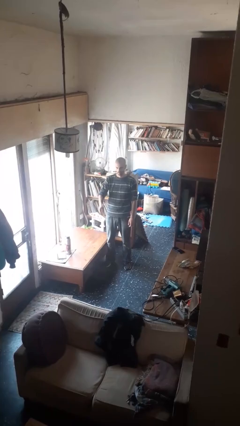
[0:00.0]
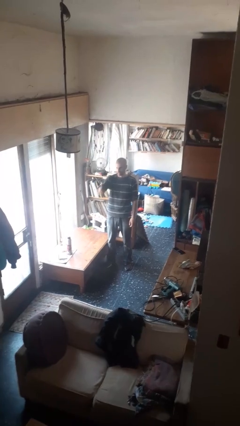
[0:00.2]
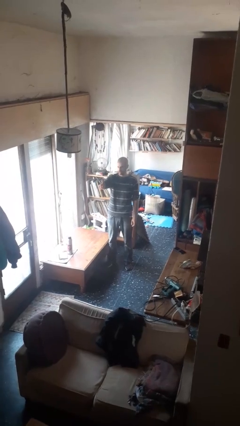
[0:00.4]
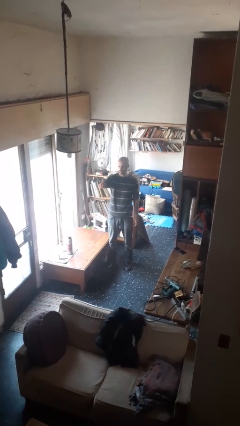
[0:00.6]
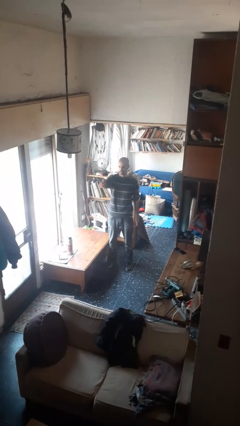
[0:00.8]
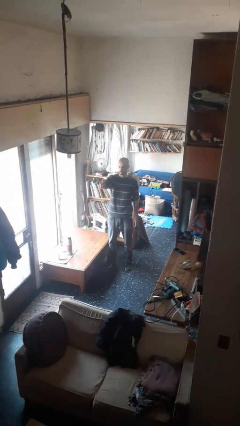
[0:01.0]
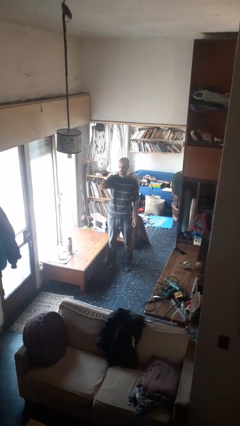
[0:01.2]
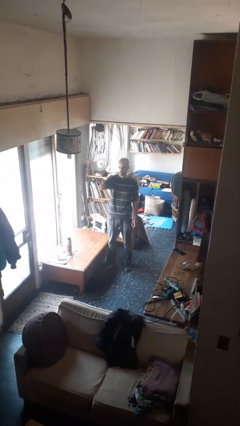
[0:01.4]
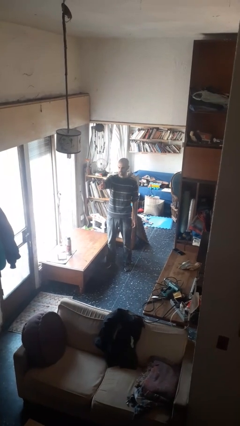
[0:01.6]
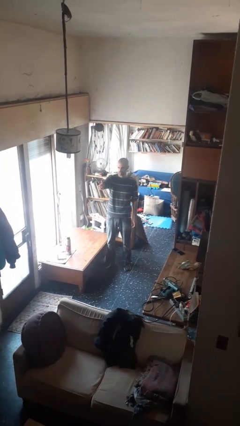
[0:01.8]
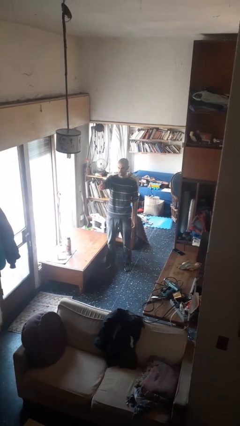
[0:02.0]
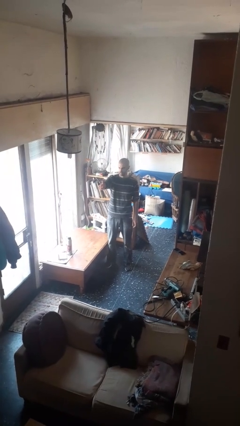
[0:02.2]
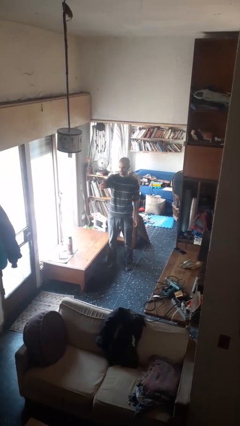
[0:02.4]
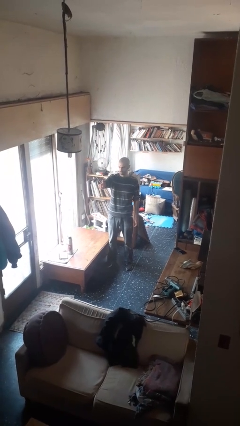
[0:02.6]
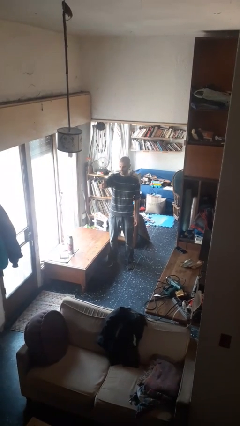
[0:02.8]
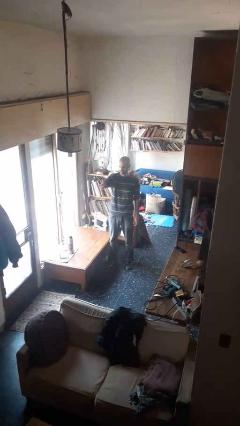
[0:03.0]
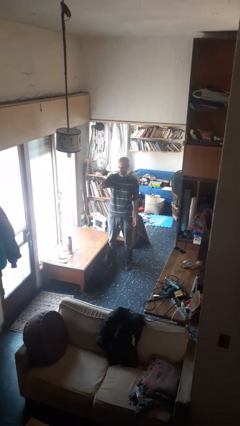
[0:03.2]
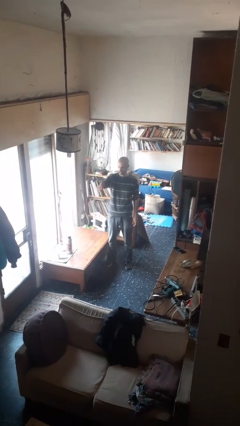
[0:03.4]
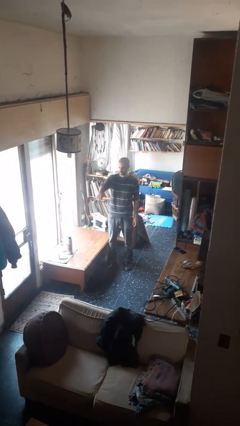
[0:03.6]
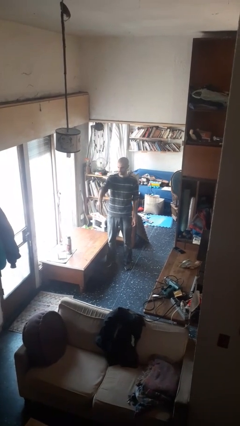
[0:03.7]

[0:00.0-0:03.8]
person gestures number one

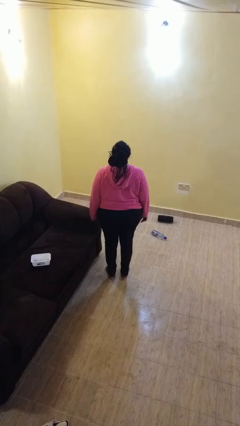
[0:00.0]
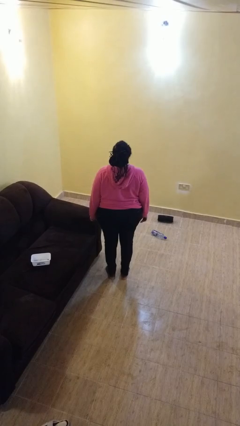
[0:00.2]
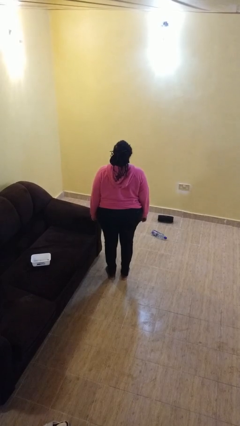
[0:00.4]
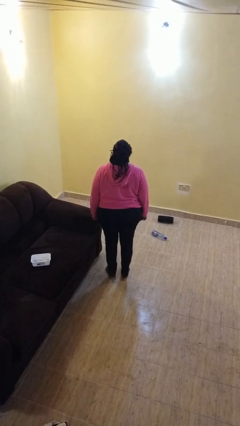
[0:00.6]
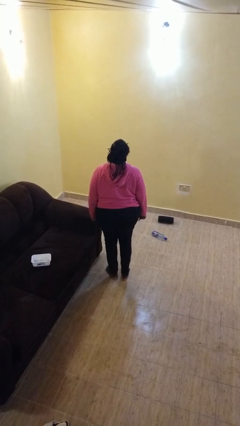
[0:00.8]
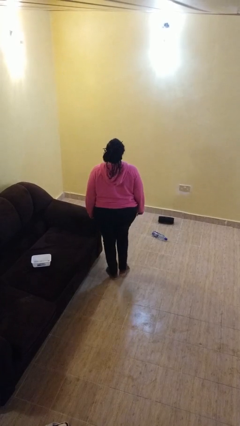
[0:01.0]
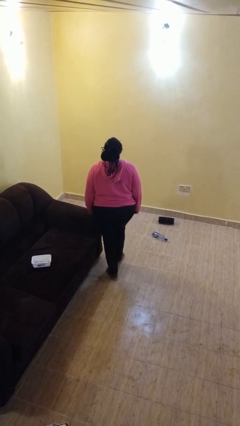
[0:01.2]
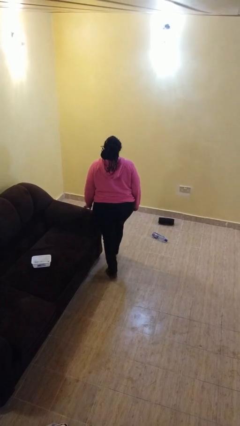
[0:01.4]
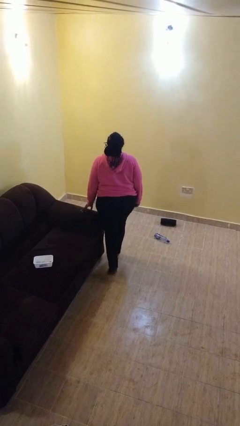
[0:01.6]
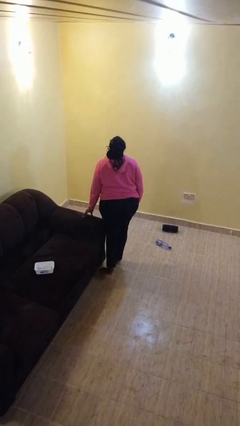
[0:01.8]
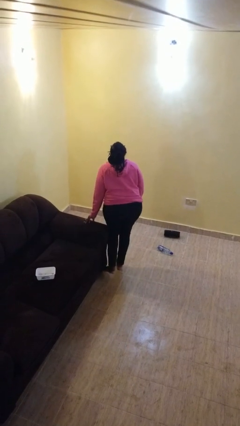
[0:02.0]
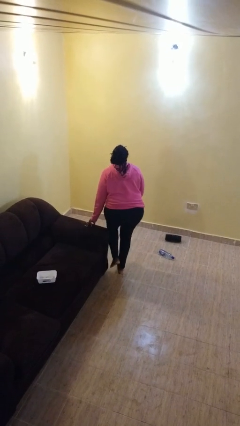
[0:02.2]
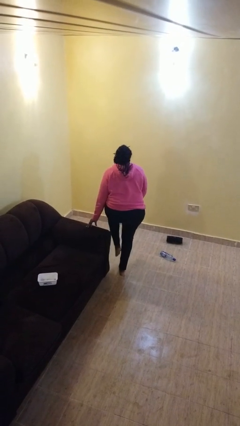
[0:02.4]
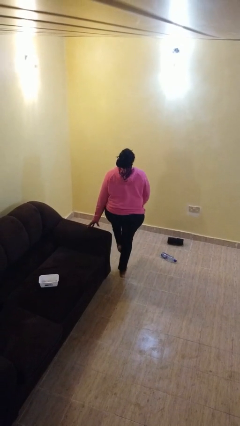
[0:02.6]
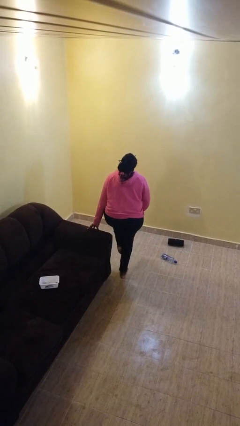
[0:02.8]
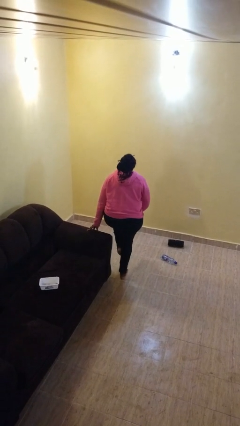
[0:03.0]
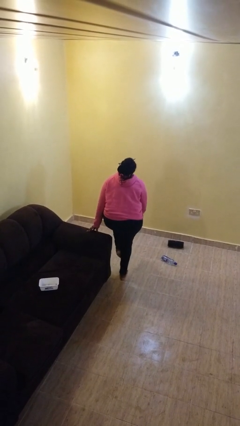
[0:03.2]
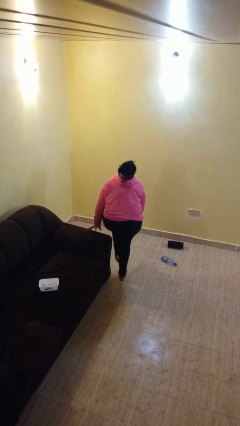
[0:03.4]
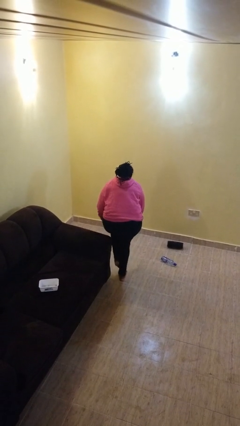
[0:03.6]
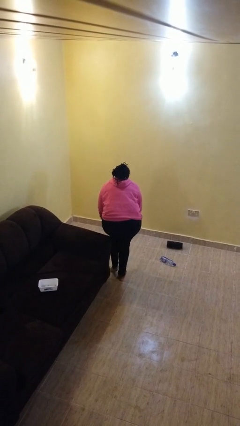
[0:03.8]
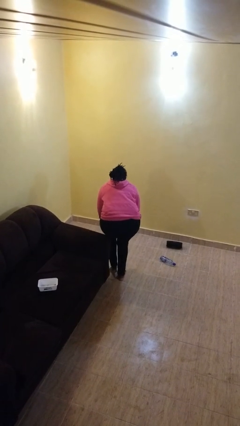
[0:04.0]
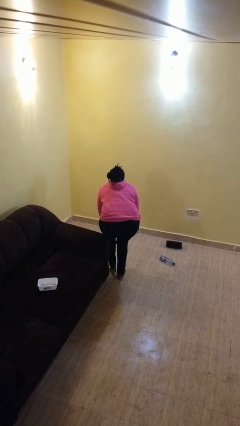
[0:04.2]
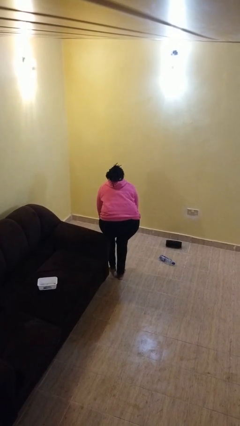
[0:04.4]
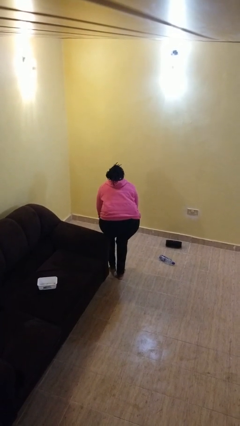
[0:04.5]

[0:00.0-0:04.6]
person stubs toe

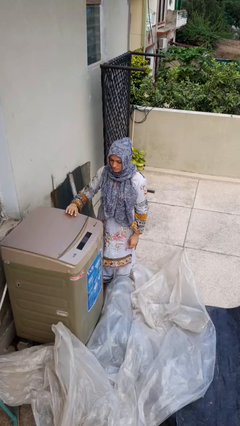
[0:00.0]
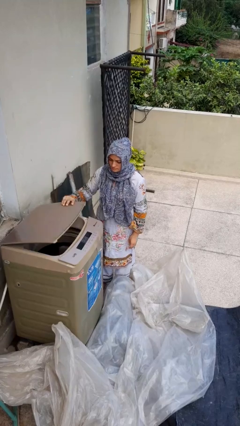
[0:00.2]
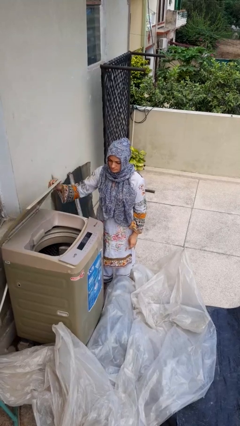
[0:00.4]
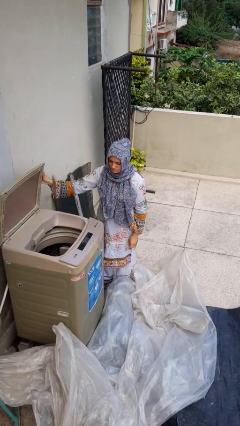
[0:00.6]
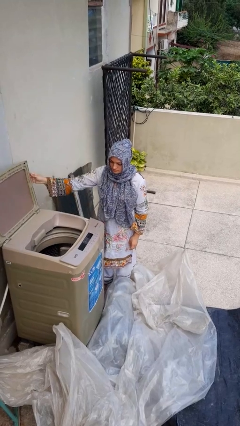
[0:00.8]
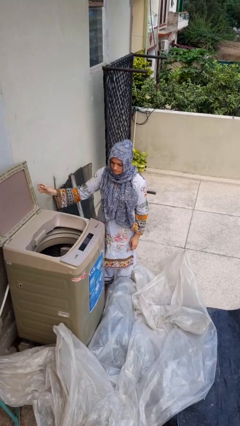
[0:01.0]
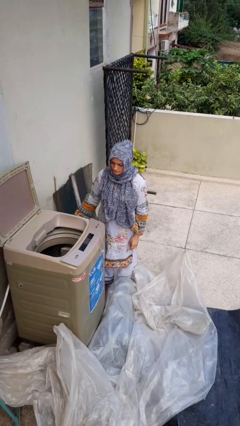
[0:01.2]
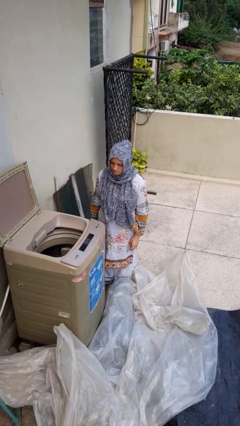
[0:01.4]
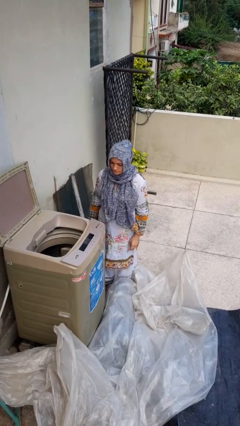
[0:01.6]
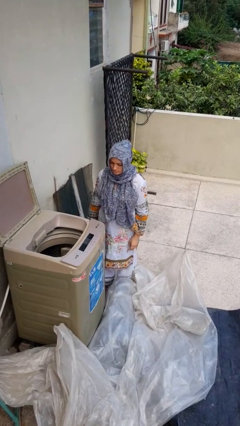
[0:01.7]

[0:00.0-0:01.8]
person opens clothes washer

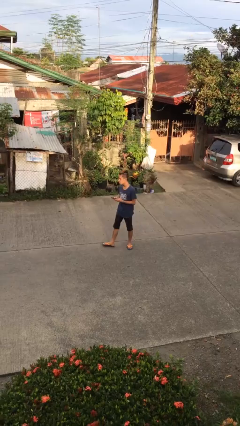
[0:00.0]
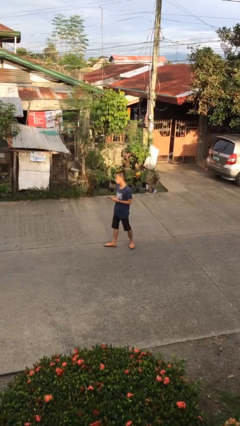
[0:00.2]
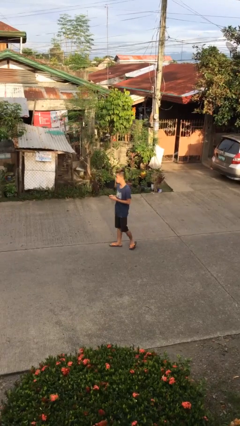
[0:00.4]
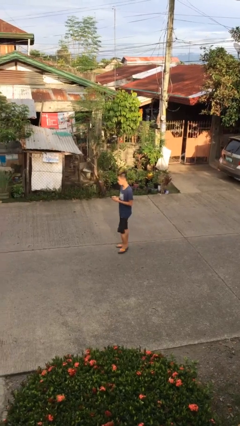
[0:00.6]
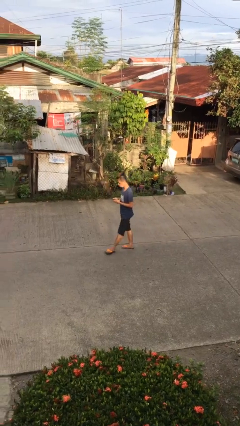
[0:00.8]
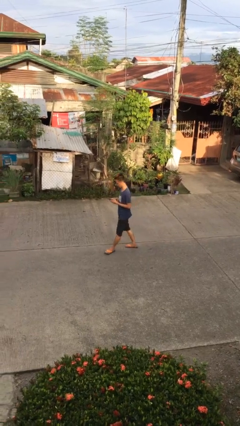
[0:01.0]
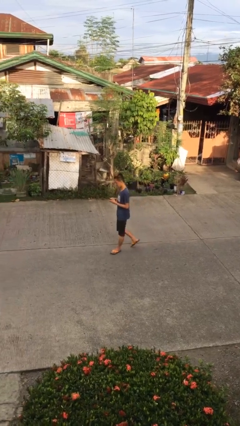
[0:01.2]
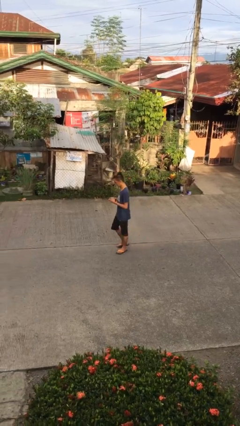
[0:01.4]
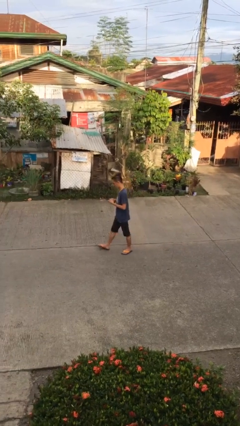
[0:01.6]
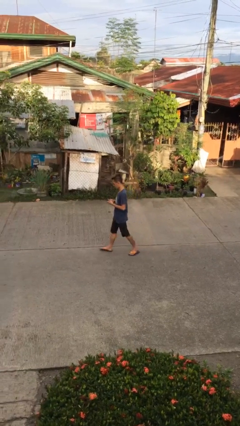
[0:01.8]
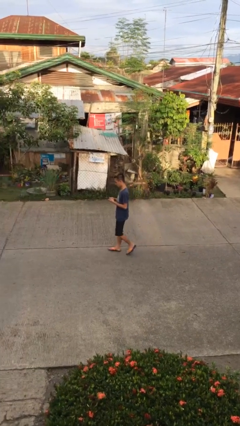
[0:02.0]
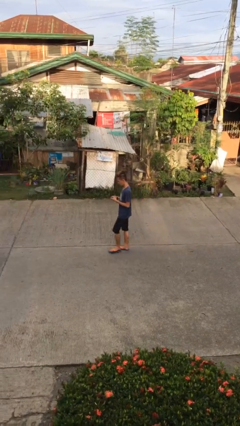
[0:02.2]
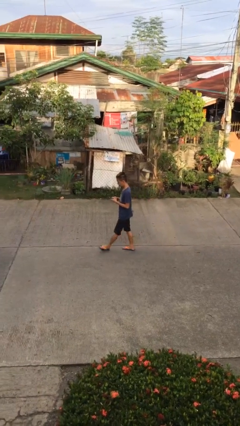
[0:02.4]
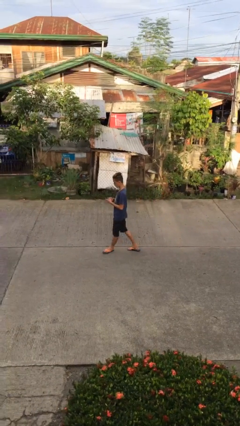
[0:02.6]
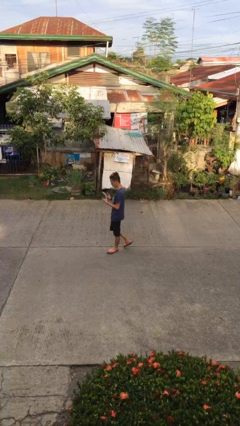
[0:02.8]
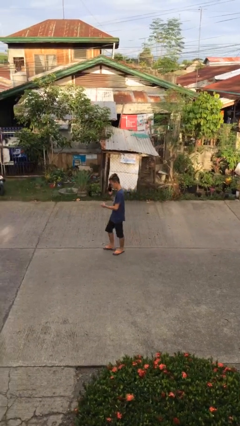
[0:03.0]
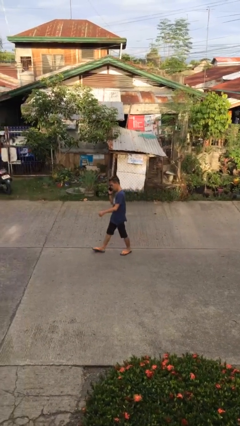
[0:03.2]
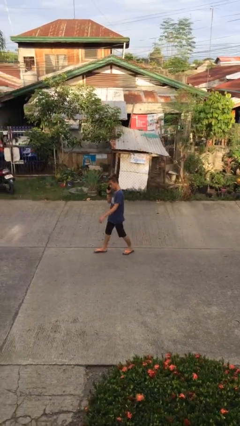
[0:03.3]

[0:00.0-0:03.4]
person texts on phone

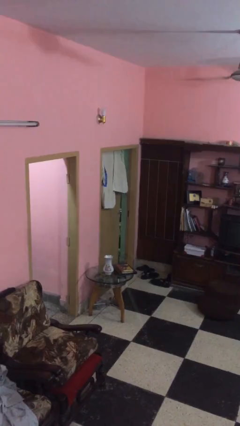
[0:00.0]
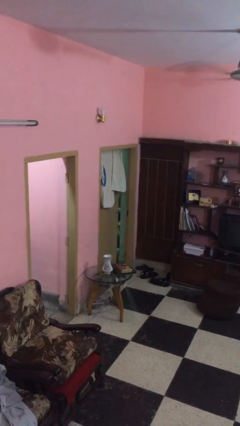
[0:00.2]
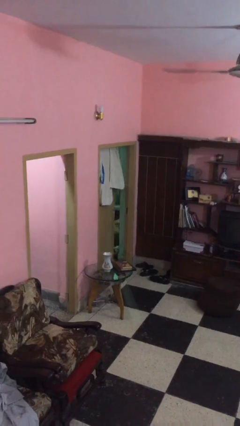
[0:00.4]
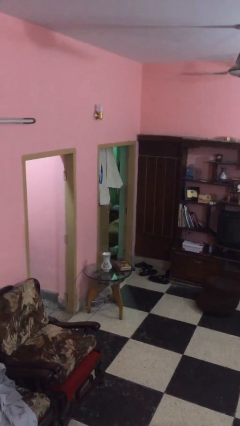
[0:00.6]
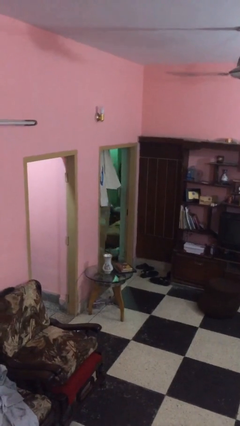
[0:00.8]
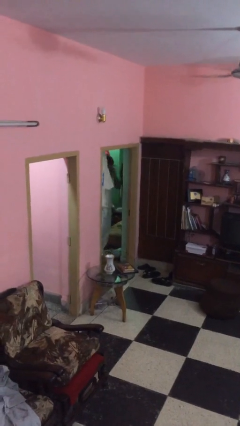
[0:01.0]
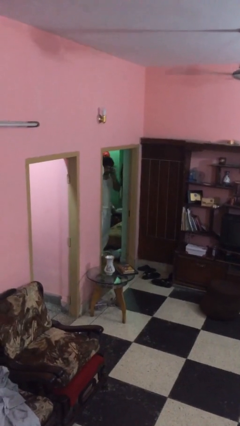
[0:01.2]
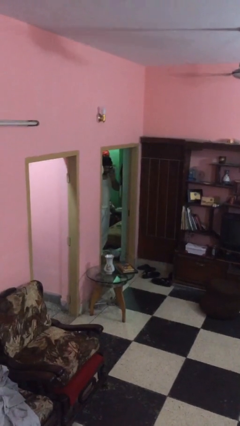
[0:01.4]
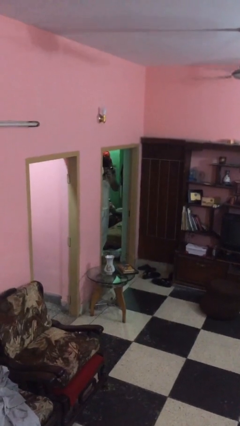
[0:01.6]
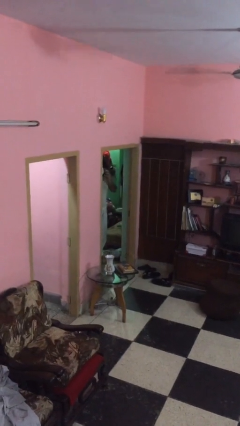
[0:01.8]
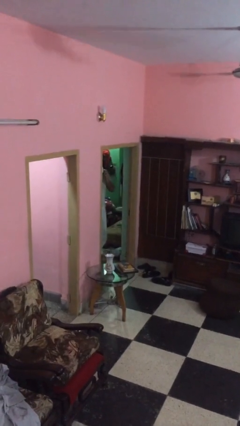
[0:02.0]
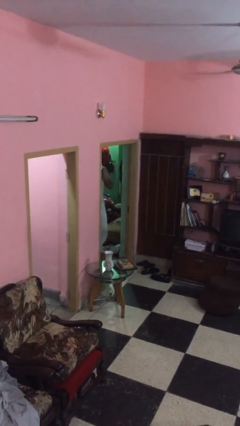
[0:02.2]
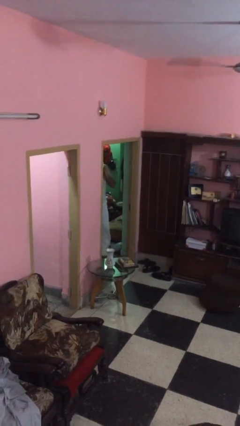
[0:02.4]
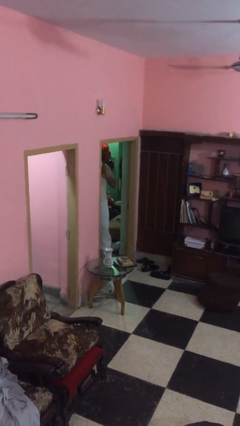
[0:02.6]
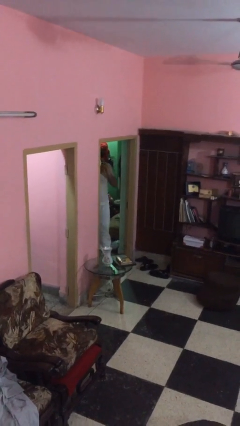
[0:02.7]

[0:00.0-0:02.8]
person opens facility door

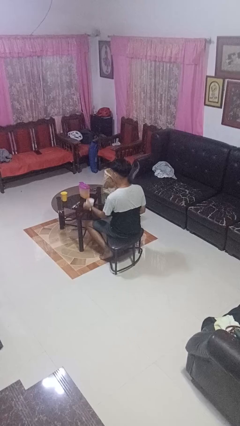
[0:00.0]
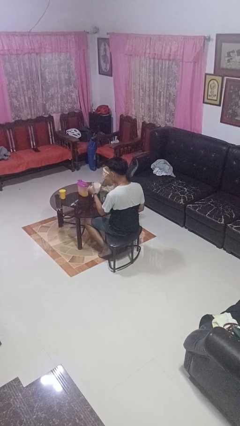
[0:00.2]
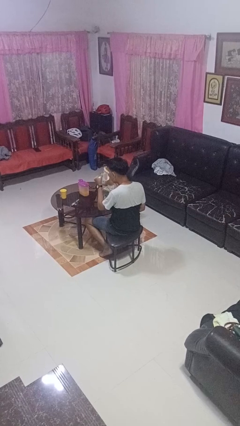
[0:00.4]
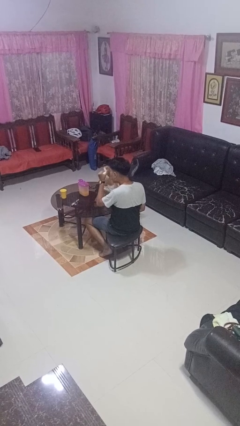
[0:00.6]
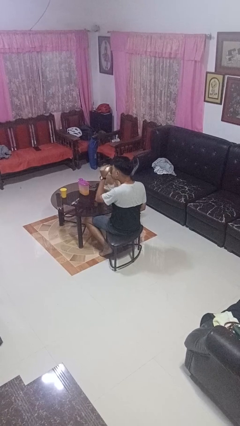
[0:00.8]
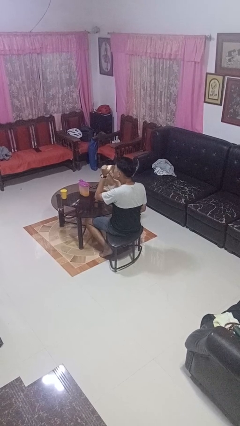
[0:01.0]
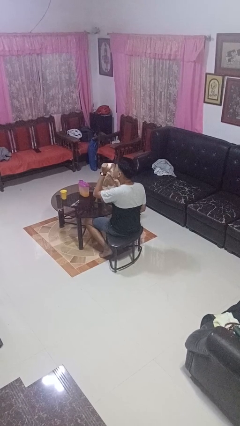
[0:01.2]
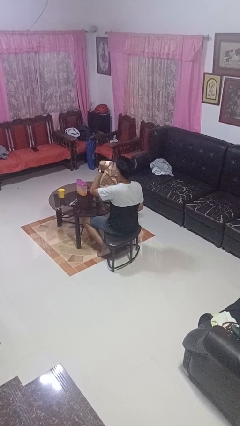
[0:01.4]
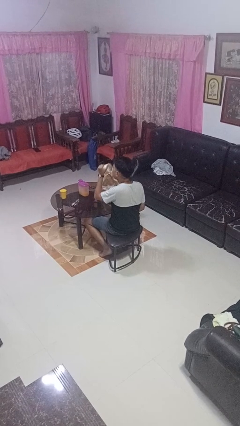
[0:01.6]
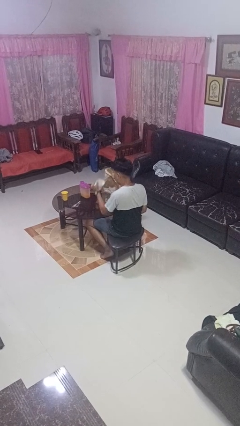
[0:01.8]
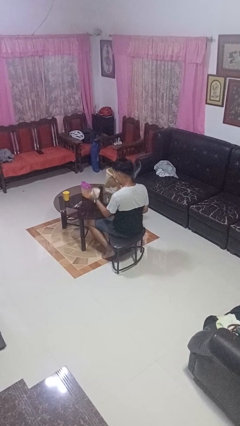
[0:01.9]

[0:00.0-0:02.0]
person drinks from mug
